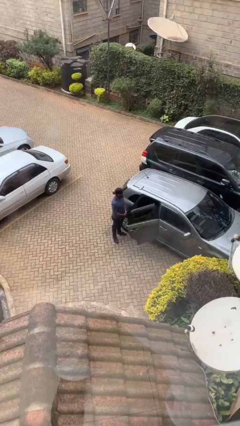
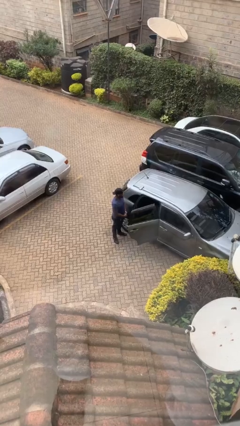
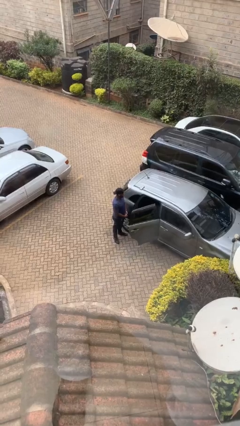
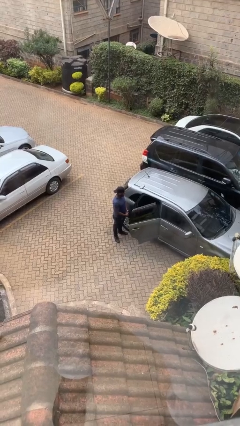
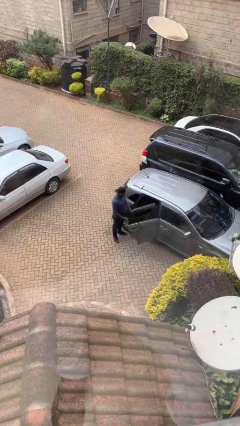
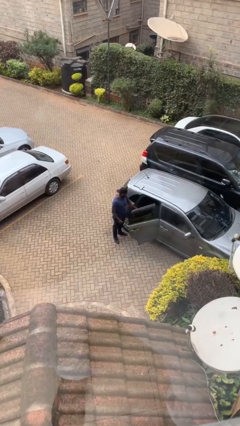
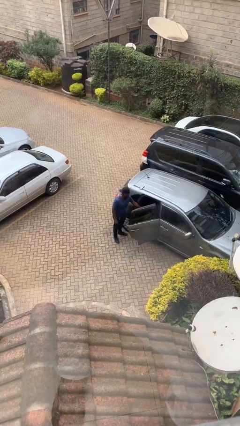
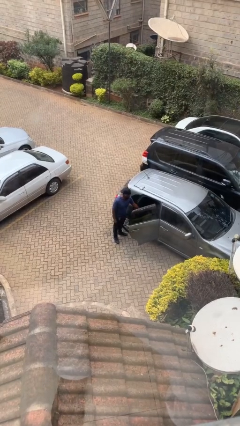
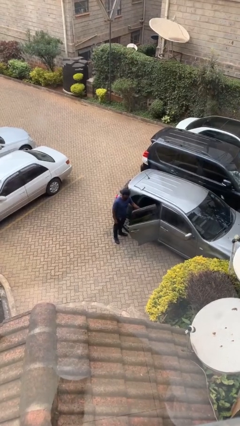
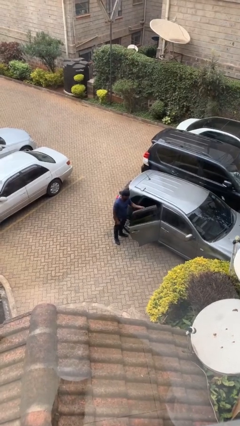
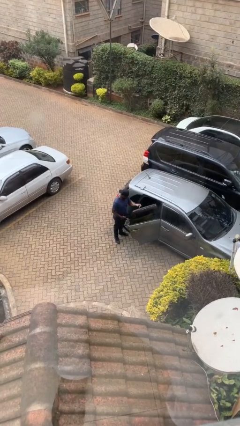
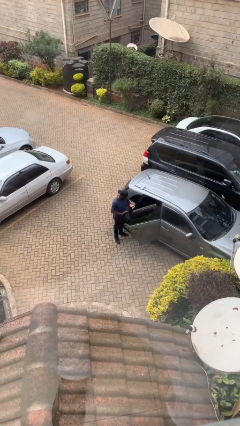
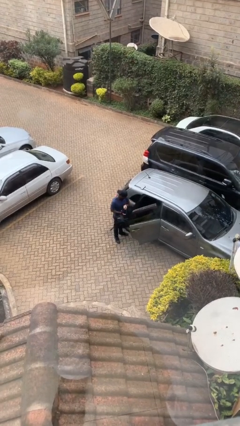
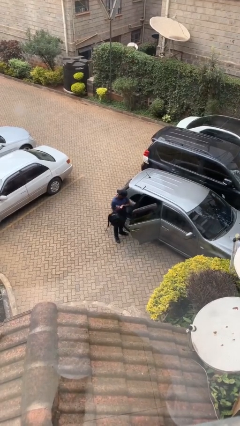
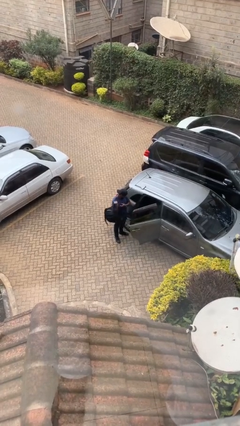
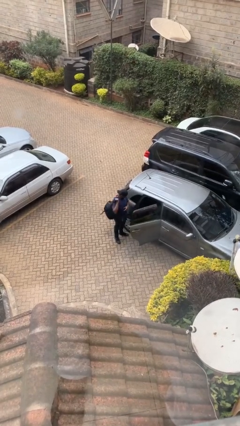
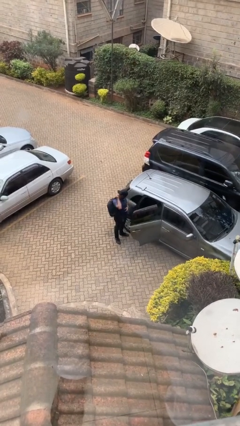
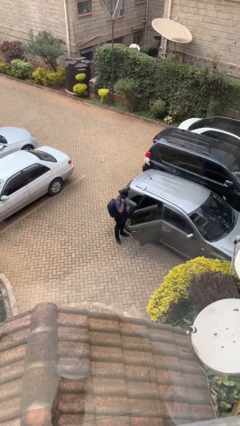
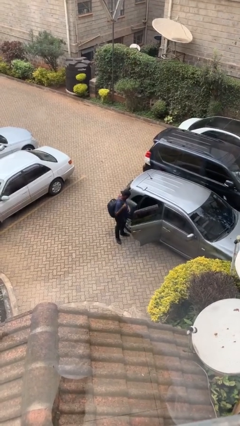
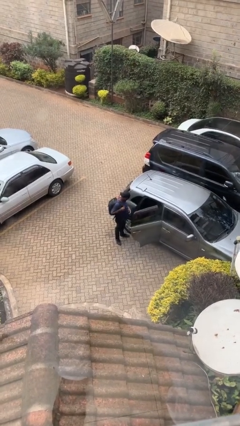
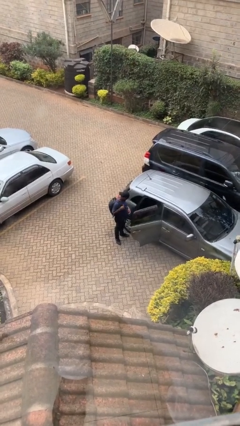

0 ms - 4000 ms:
person unloads car

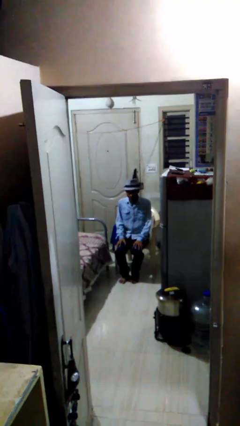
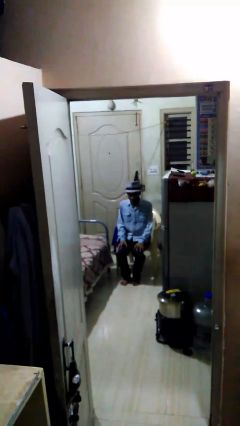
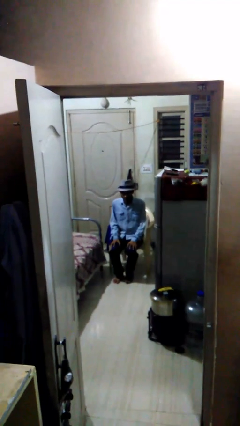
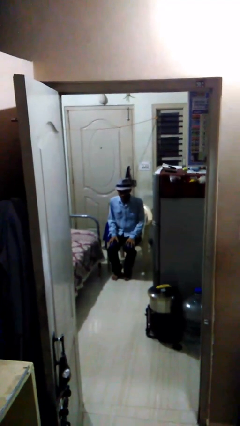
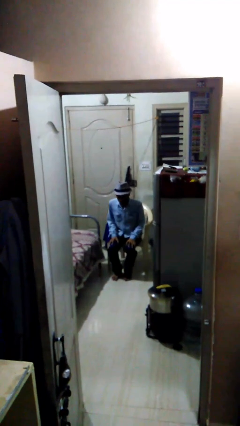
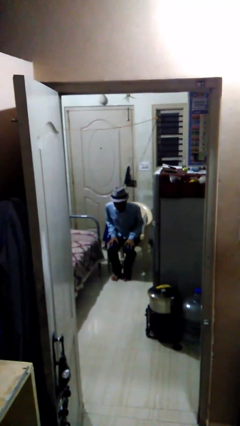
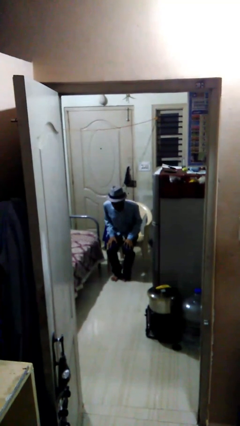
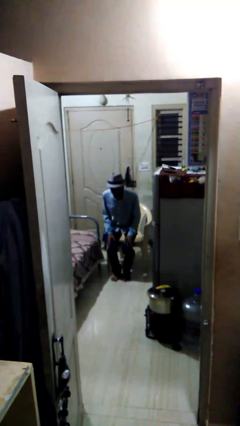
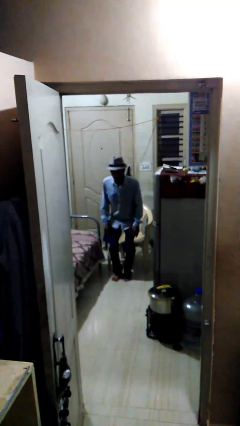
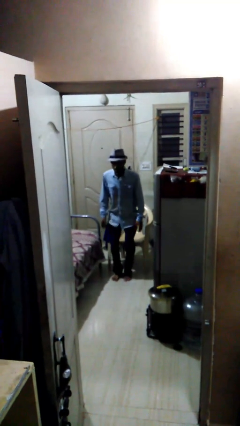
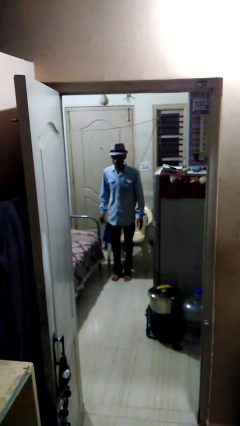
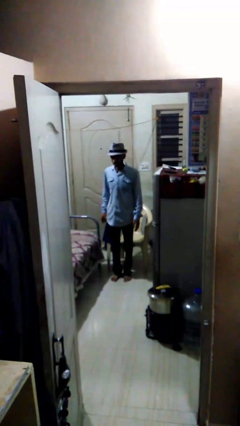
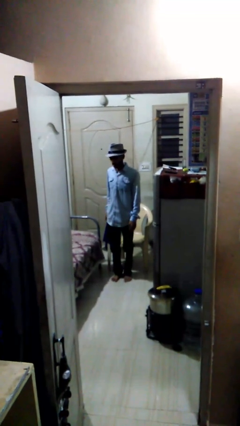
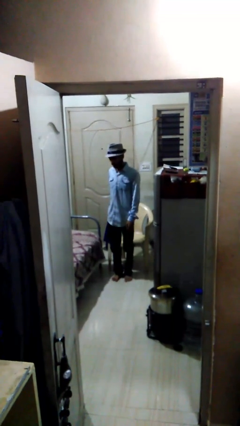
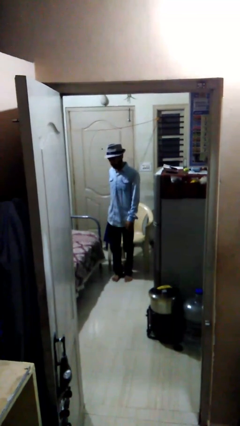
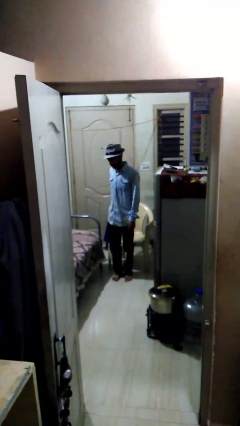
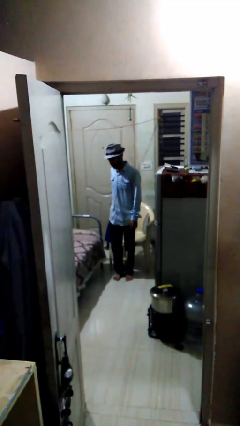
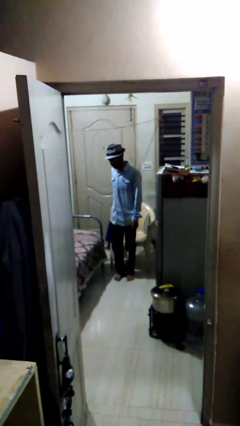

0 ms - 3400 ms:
person stands up

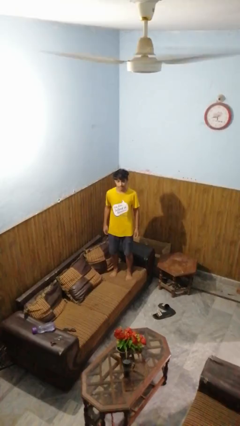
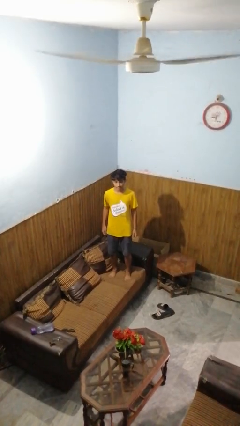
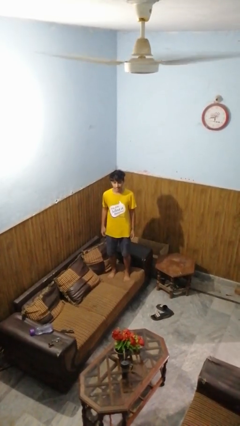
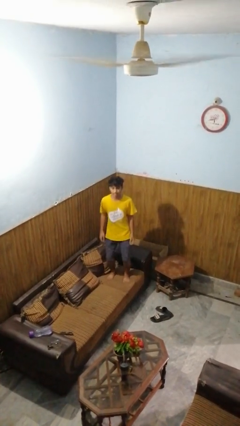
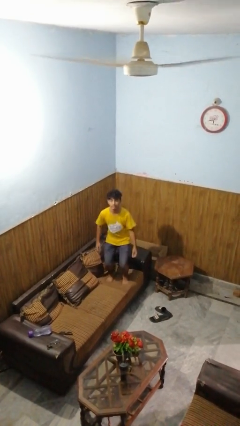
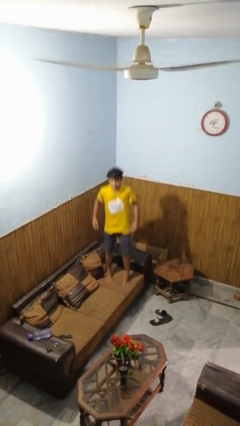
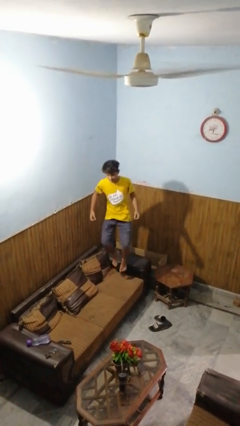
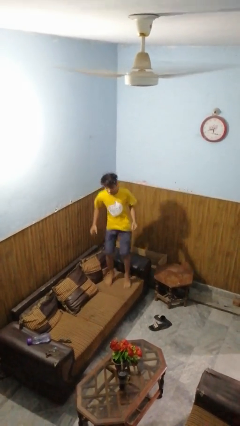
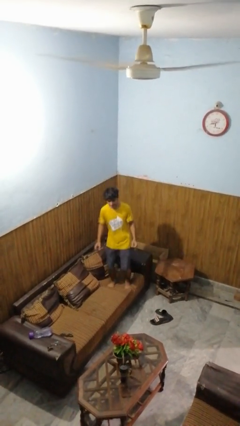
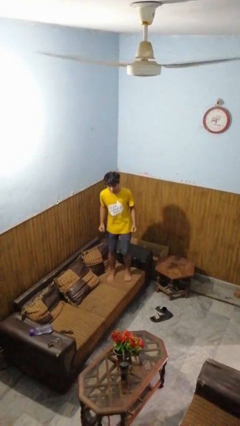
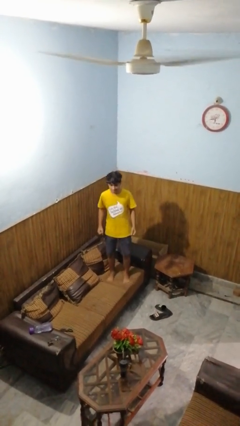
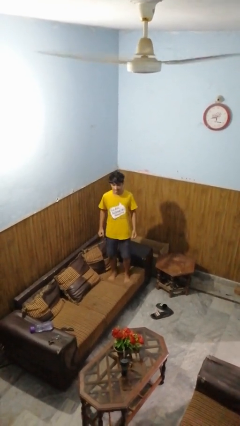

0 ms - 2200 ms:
person jumps on couch

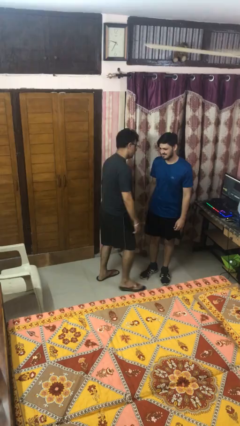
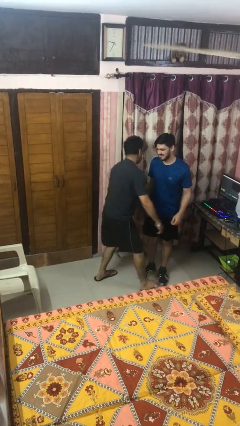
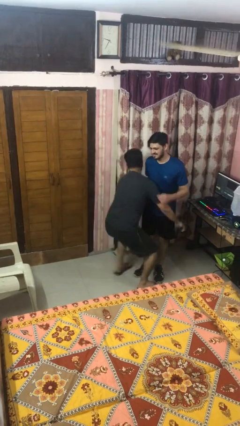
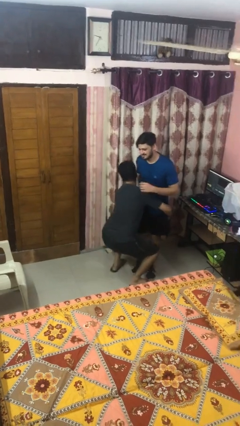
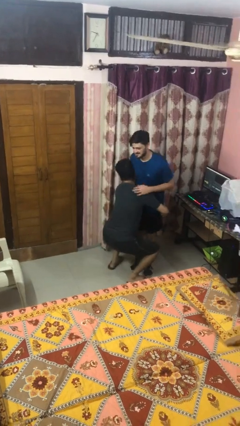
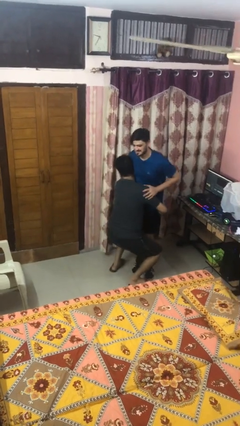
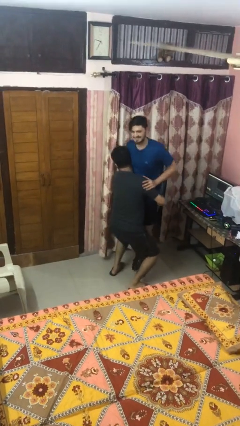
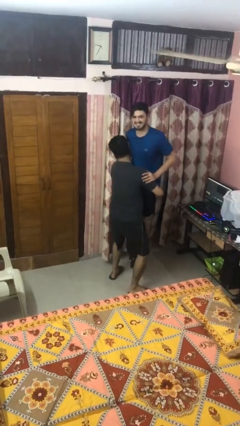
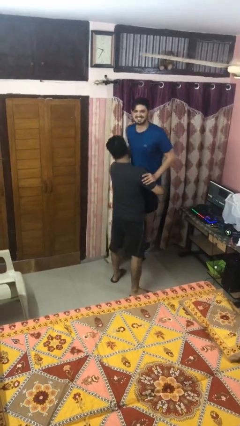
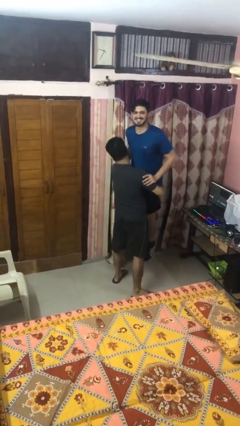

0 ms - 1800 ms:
person picks up person

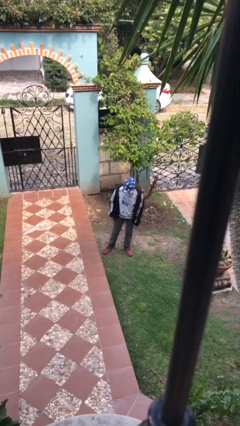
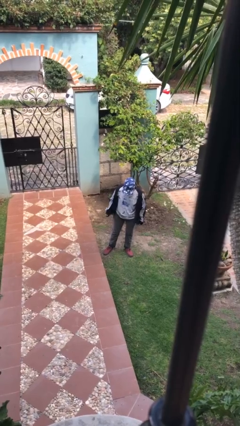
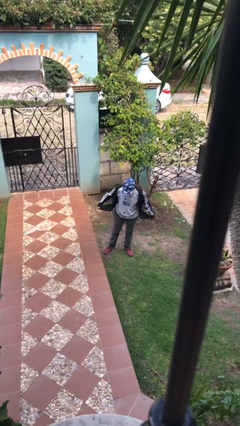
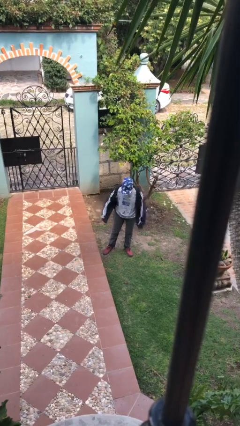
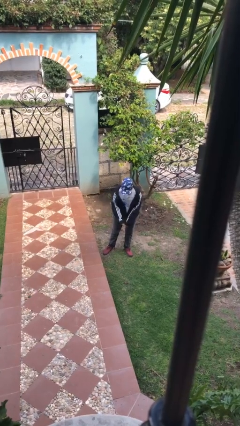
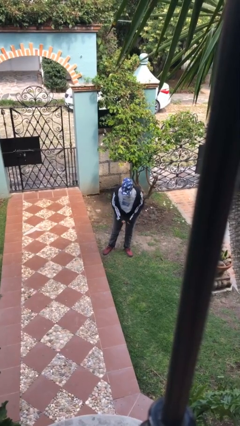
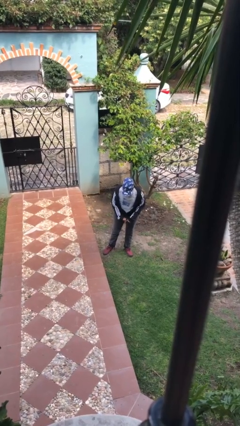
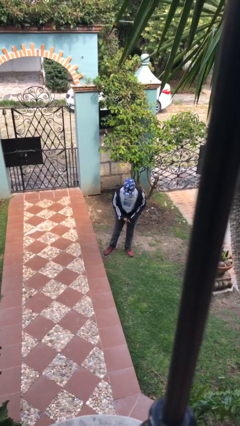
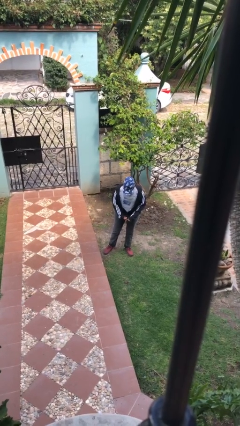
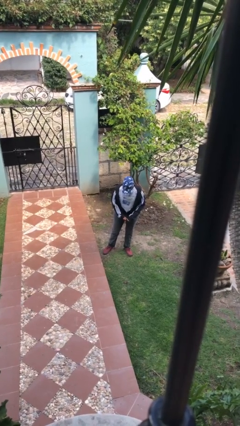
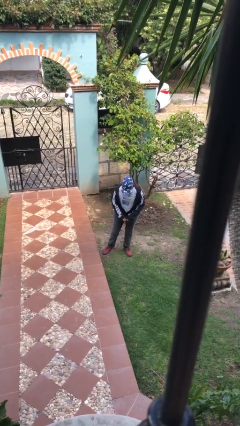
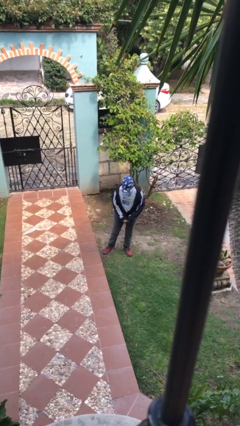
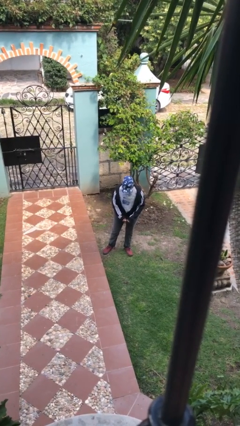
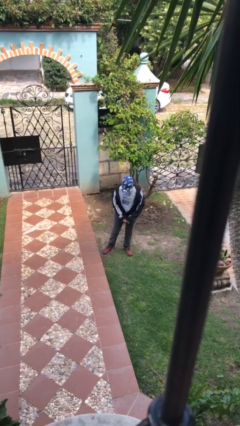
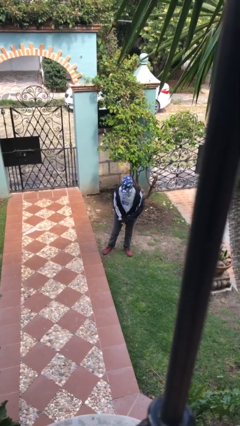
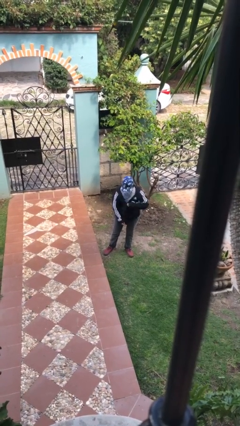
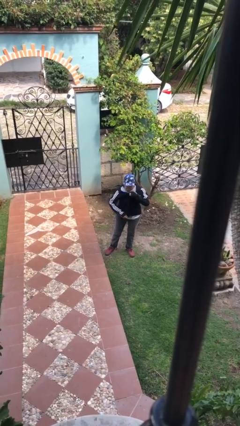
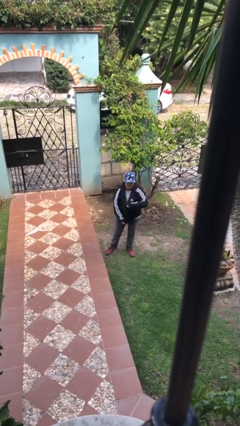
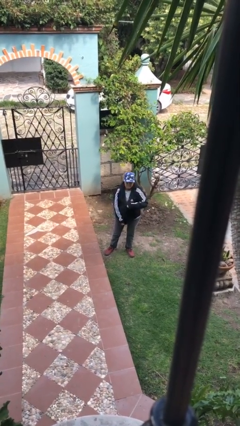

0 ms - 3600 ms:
person zips up jacket

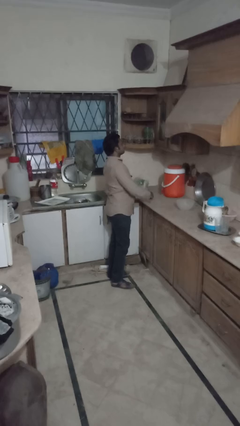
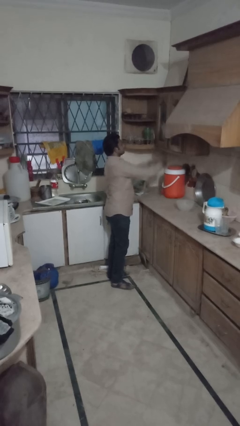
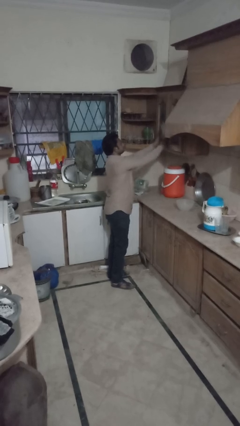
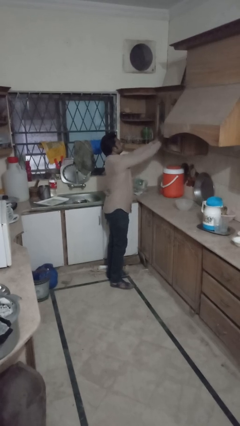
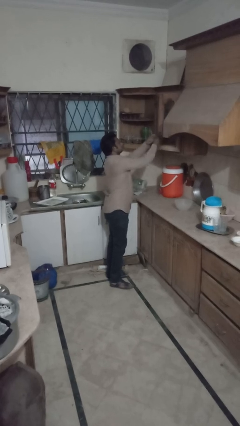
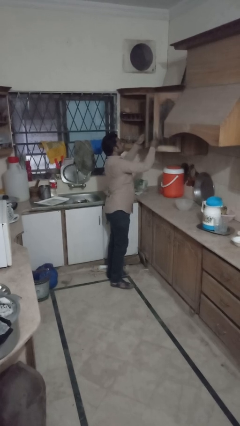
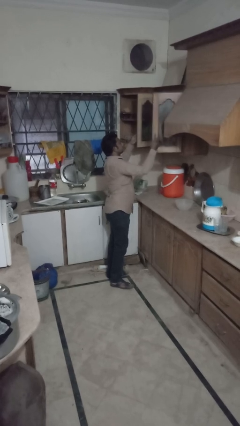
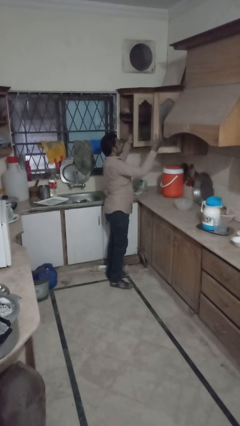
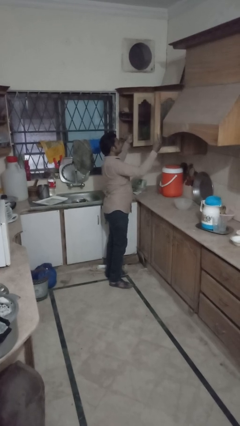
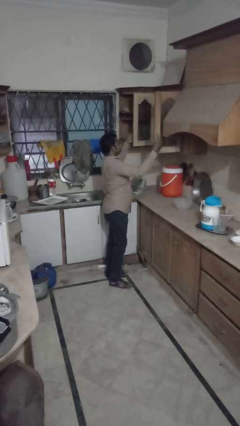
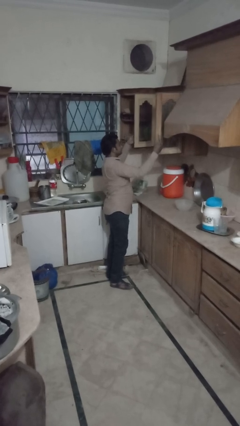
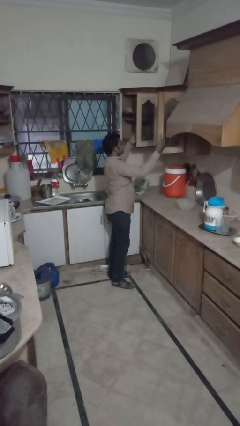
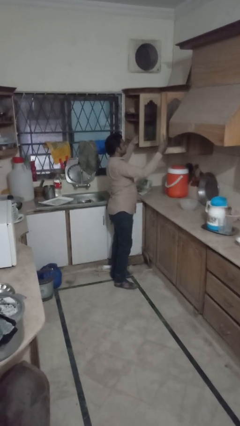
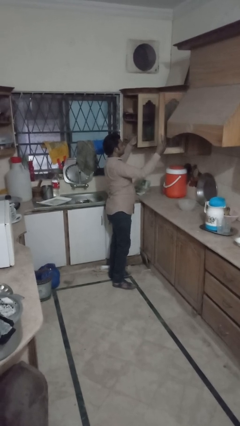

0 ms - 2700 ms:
person opens cabinet
